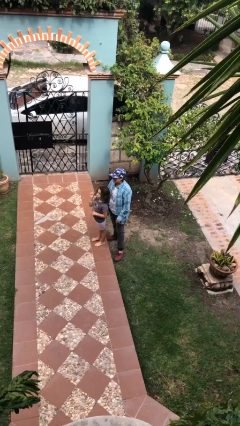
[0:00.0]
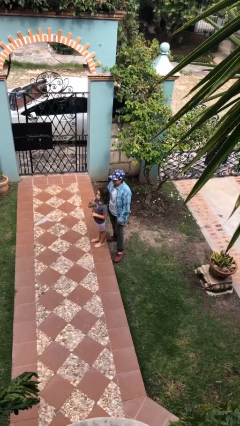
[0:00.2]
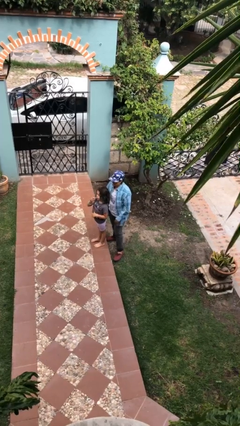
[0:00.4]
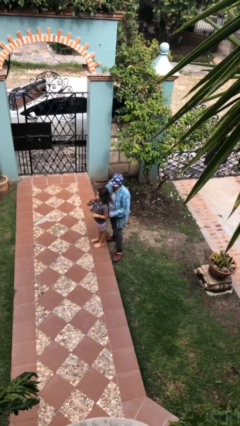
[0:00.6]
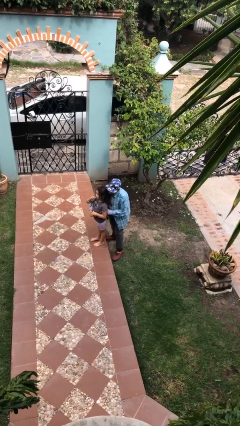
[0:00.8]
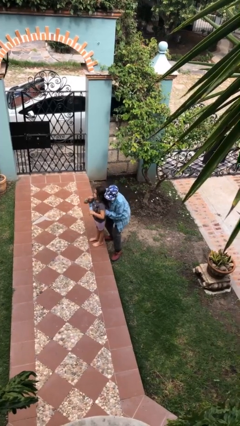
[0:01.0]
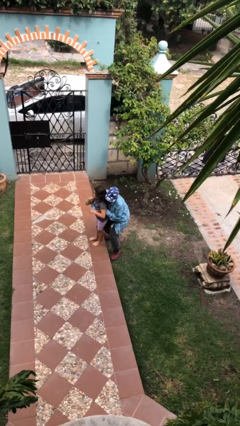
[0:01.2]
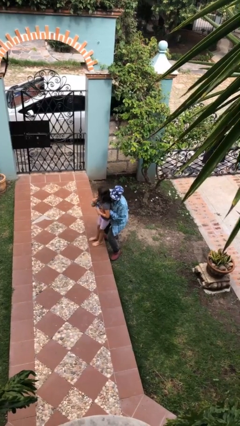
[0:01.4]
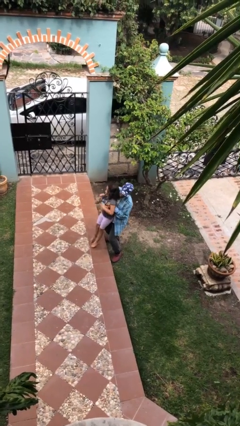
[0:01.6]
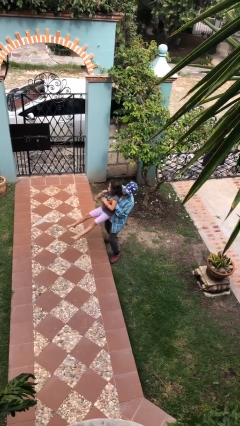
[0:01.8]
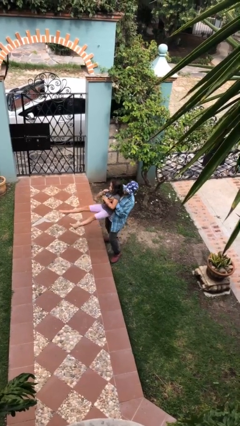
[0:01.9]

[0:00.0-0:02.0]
person picks up person

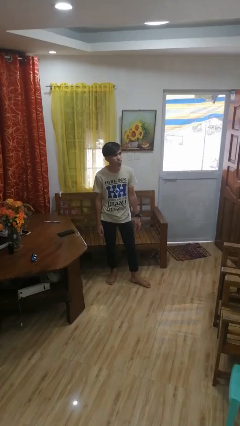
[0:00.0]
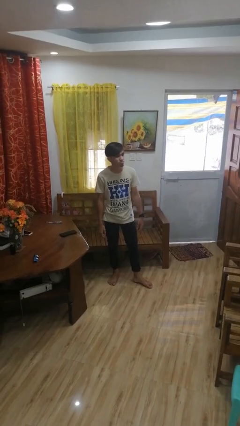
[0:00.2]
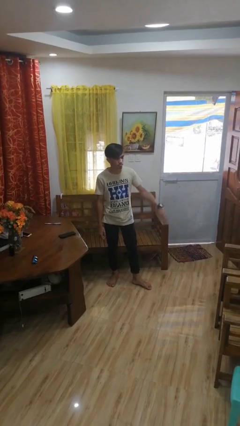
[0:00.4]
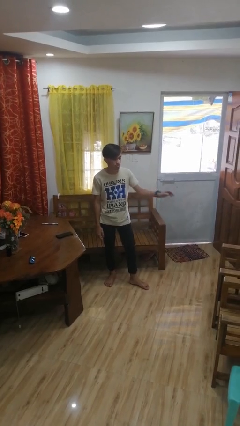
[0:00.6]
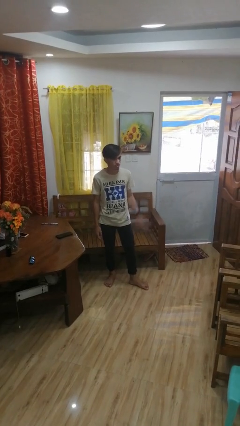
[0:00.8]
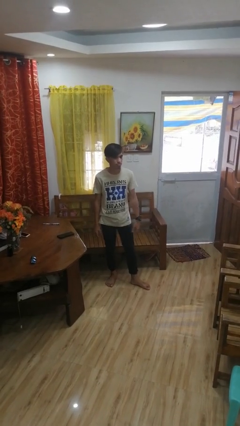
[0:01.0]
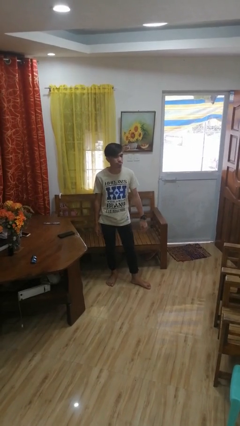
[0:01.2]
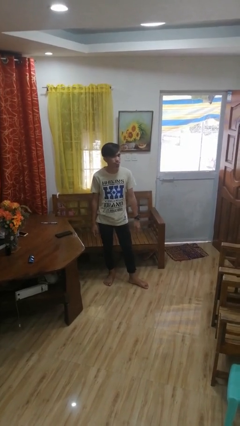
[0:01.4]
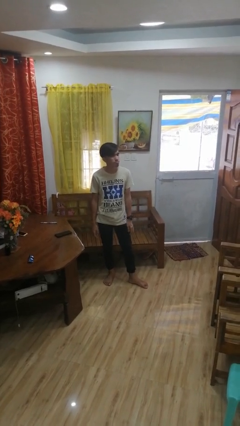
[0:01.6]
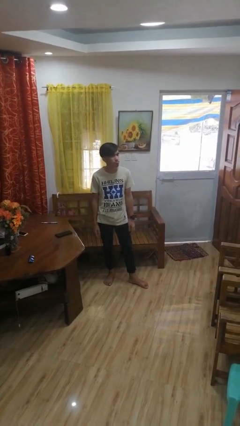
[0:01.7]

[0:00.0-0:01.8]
person slaps hands on thighs

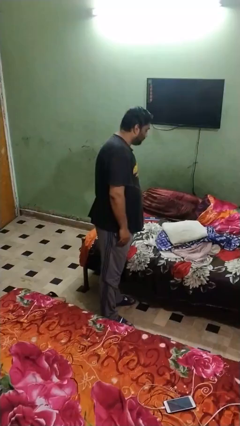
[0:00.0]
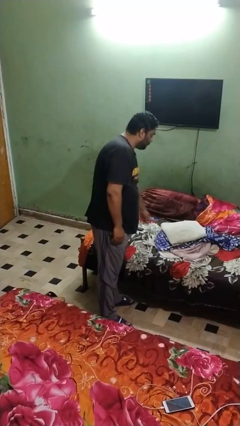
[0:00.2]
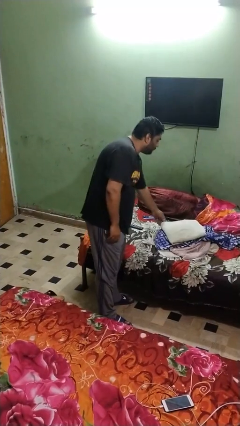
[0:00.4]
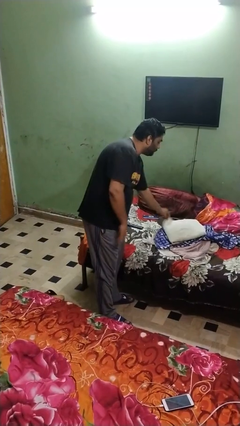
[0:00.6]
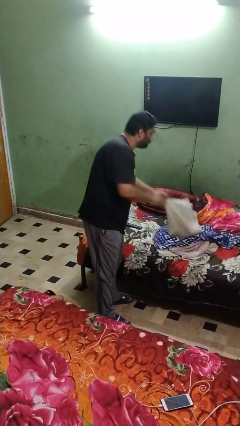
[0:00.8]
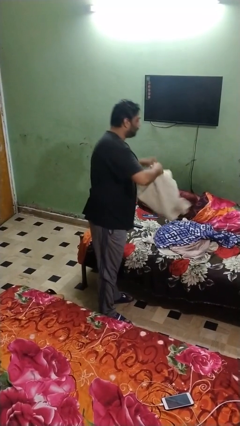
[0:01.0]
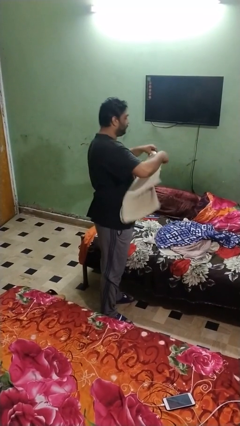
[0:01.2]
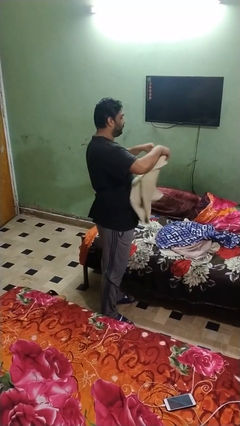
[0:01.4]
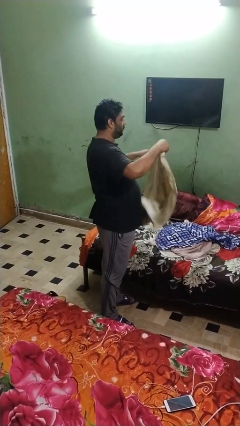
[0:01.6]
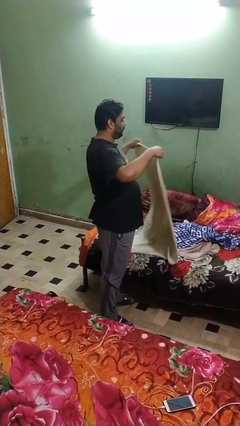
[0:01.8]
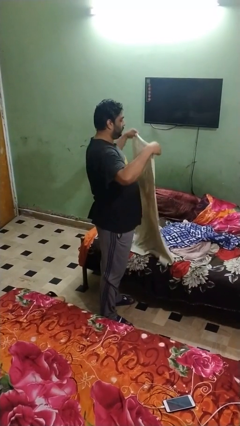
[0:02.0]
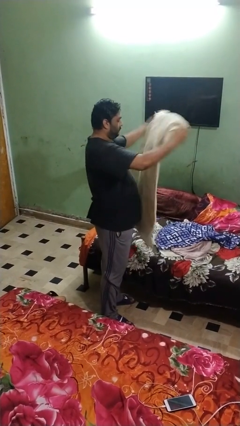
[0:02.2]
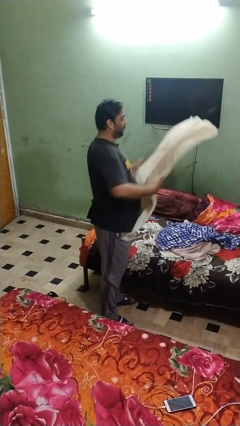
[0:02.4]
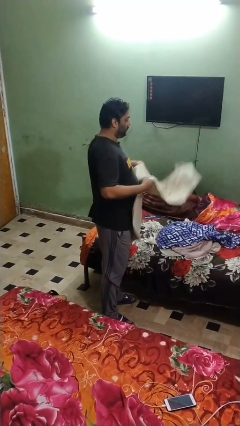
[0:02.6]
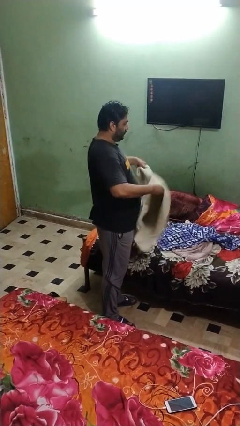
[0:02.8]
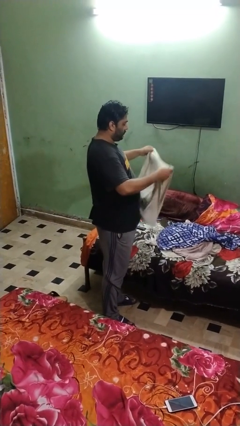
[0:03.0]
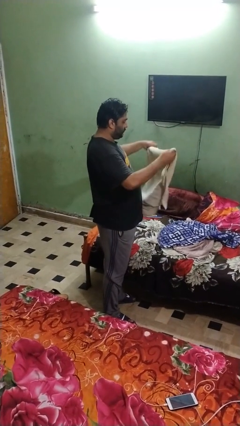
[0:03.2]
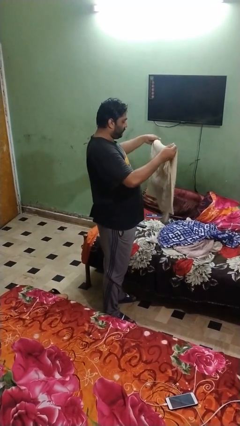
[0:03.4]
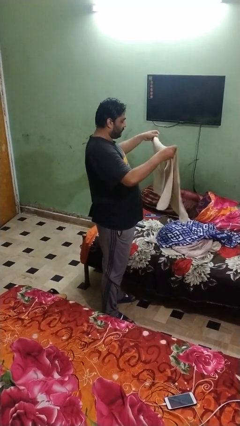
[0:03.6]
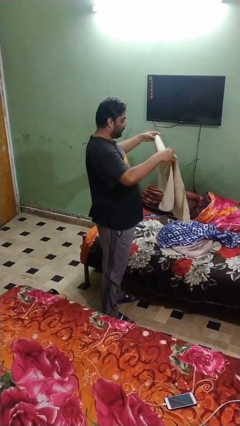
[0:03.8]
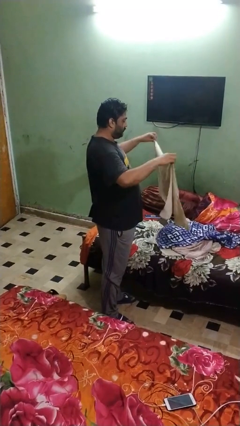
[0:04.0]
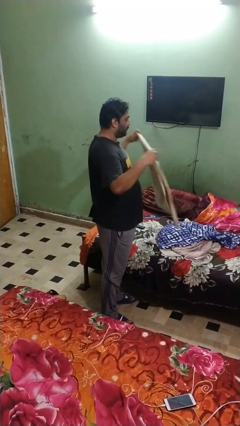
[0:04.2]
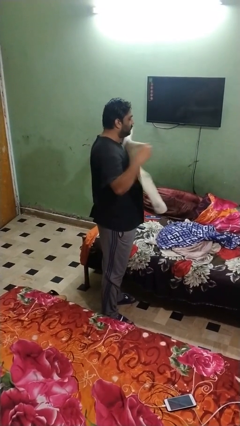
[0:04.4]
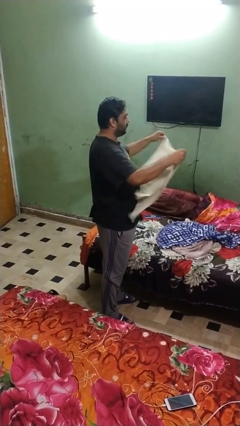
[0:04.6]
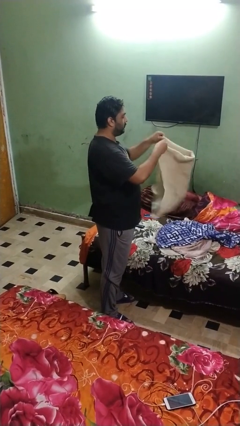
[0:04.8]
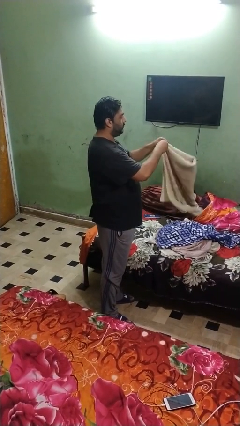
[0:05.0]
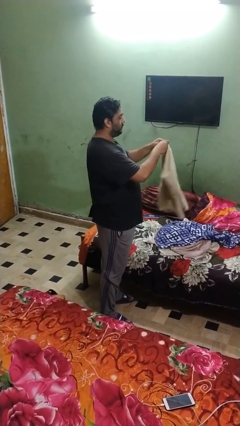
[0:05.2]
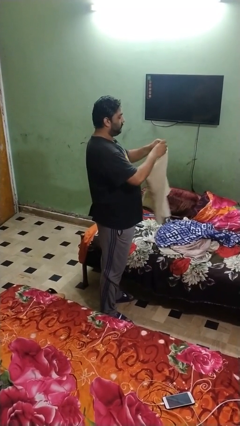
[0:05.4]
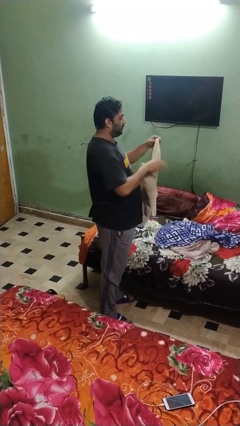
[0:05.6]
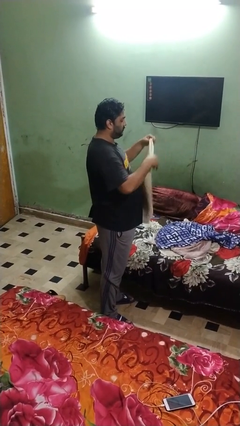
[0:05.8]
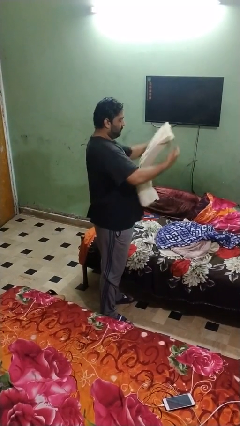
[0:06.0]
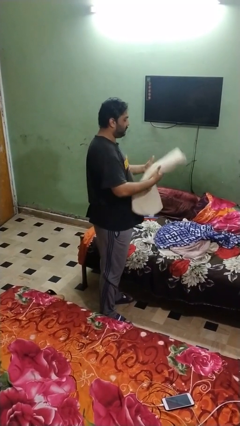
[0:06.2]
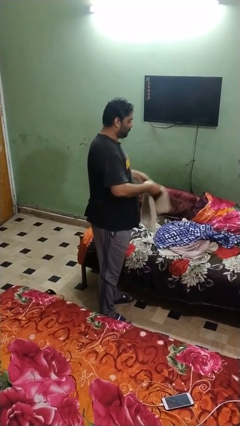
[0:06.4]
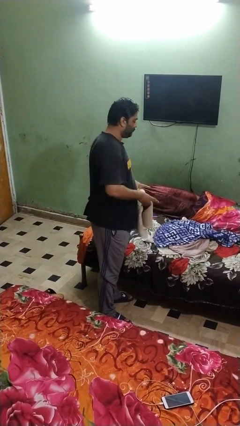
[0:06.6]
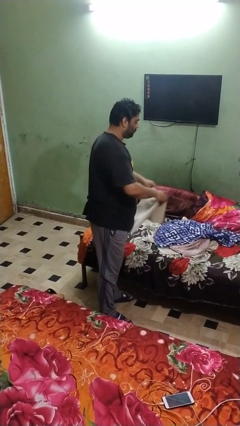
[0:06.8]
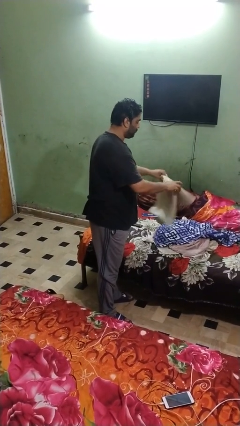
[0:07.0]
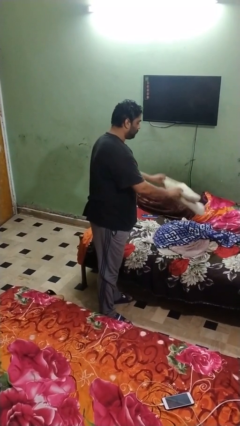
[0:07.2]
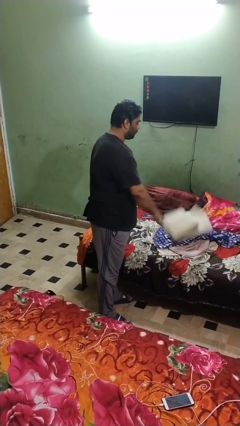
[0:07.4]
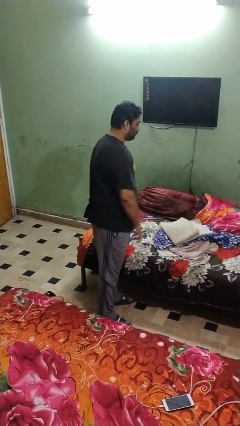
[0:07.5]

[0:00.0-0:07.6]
person folds towel

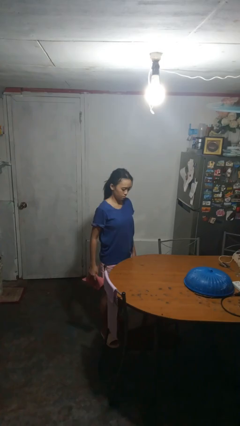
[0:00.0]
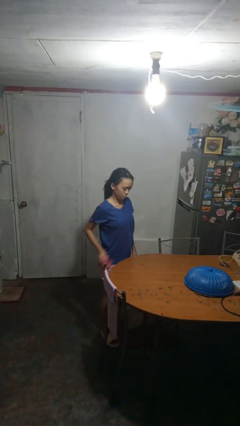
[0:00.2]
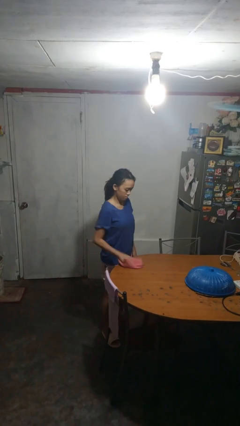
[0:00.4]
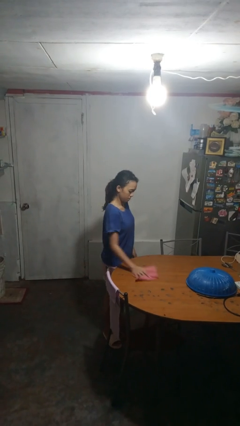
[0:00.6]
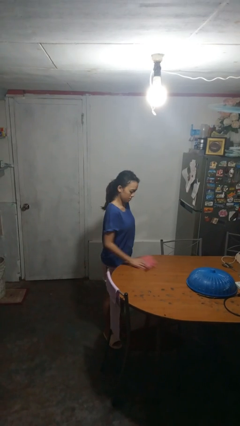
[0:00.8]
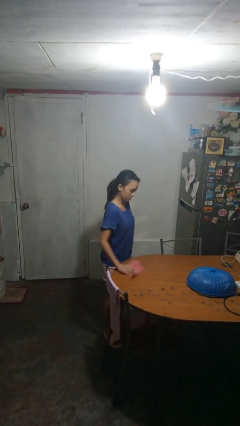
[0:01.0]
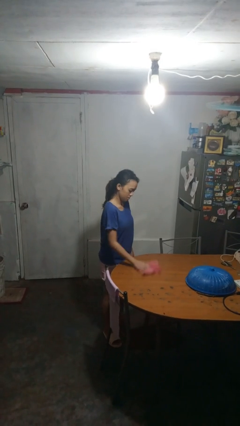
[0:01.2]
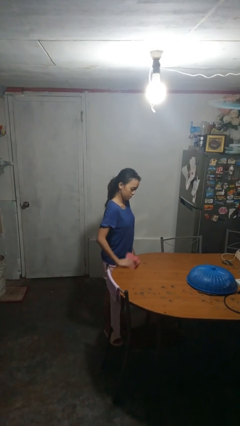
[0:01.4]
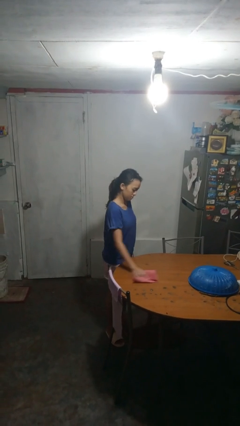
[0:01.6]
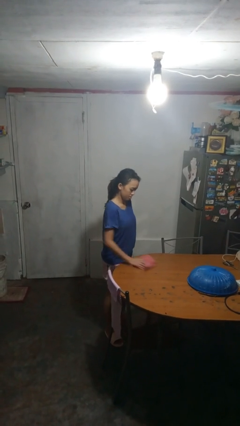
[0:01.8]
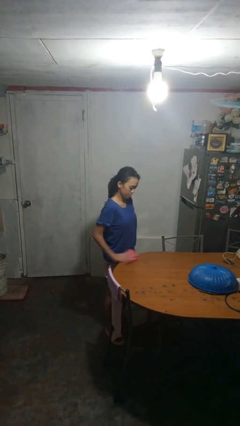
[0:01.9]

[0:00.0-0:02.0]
person cleans table with rag

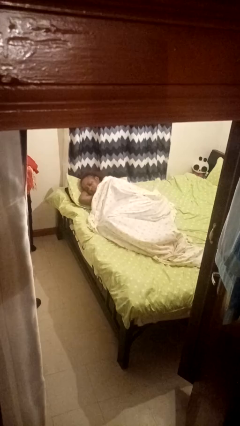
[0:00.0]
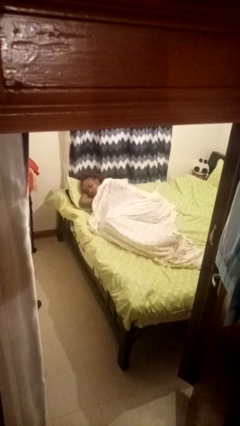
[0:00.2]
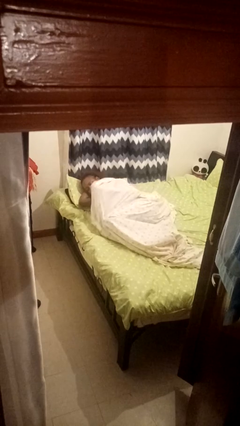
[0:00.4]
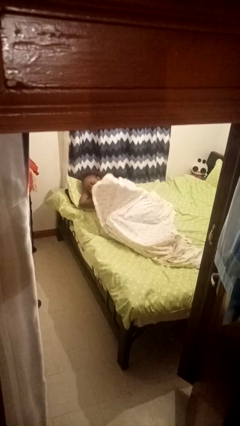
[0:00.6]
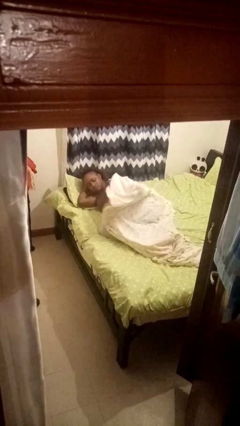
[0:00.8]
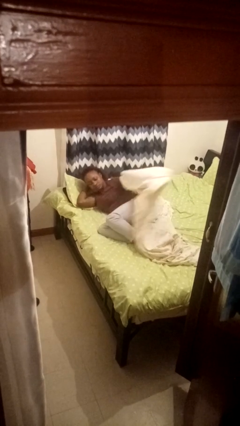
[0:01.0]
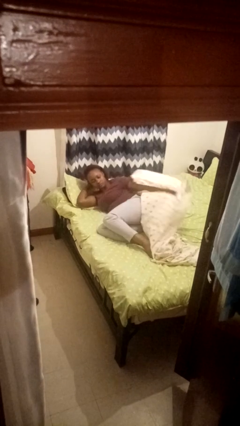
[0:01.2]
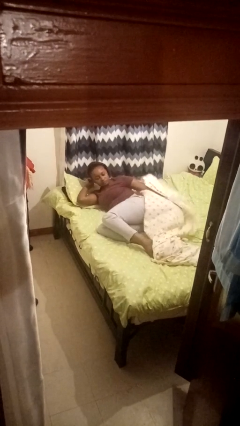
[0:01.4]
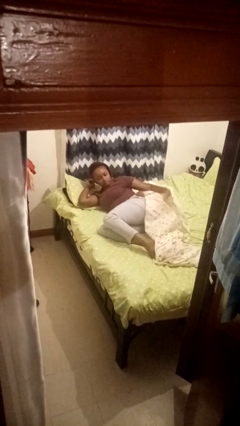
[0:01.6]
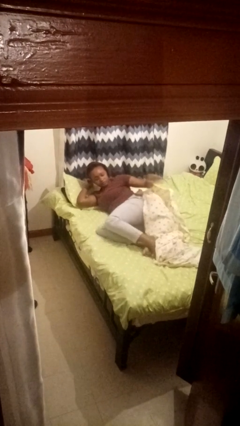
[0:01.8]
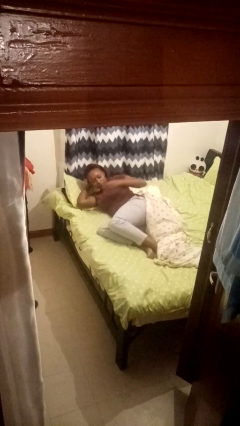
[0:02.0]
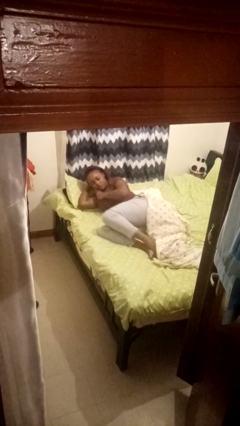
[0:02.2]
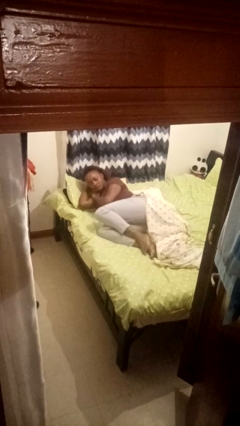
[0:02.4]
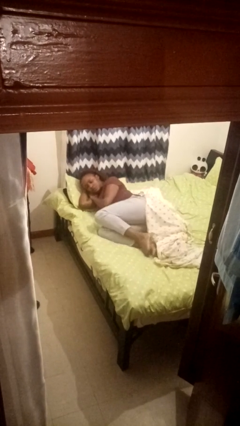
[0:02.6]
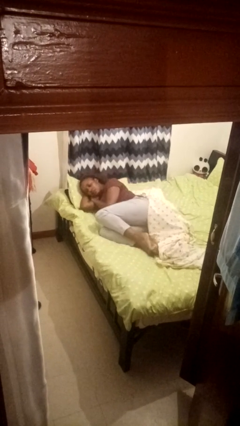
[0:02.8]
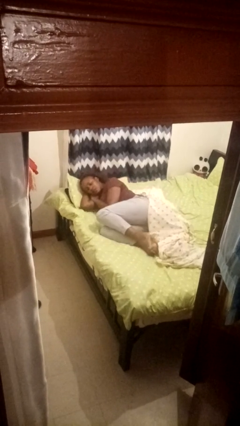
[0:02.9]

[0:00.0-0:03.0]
person uncovers with bedsheets

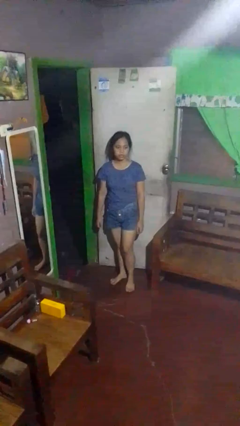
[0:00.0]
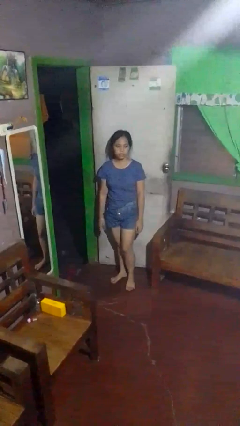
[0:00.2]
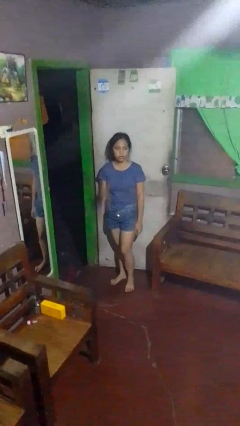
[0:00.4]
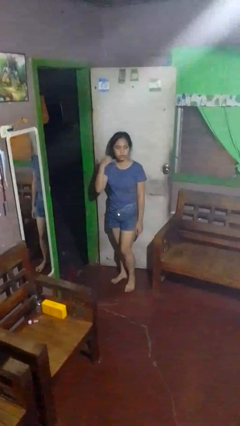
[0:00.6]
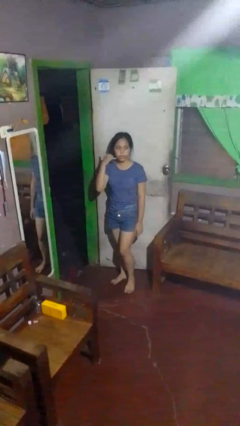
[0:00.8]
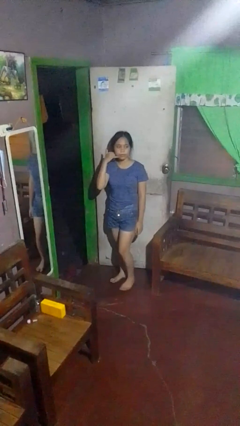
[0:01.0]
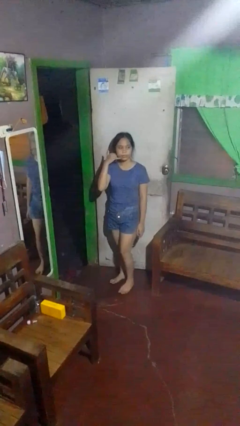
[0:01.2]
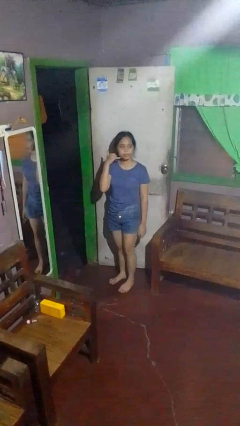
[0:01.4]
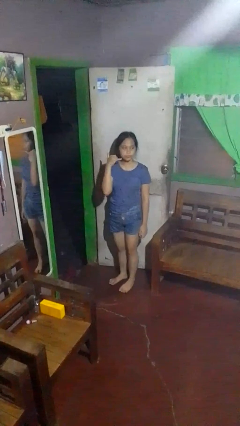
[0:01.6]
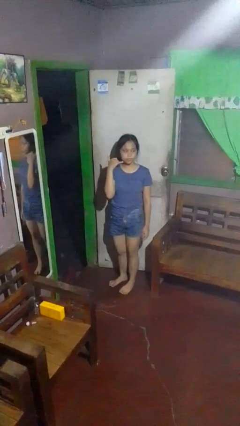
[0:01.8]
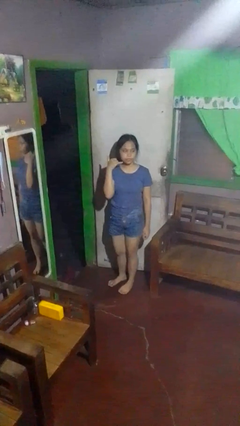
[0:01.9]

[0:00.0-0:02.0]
person gestures call me
